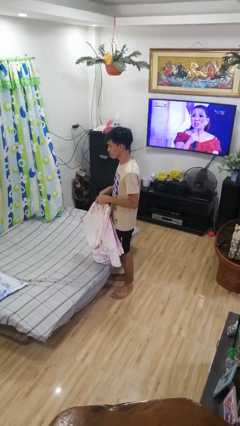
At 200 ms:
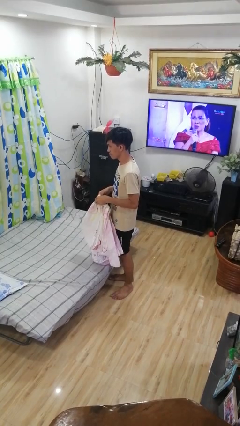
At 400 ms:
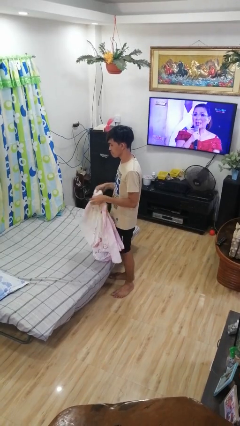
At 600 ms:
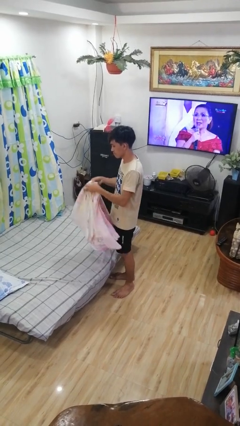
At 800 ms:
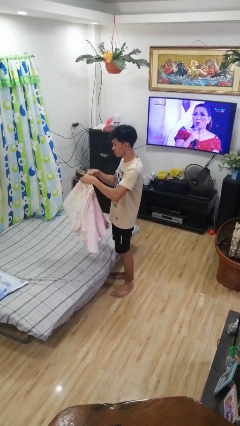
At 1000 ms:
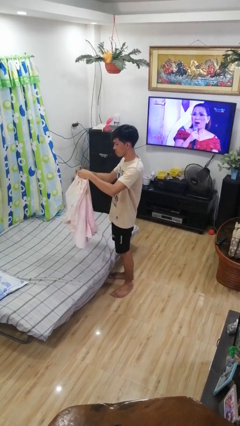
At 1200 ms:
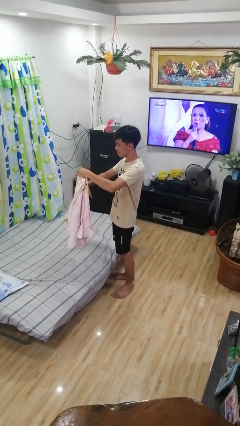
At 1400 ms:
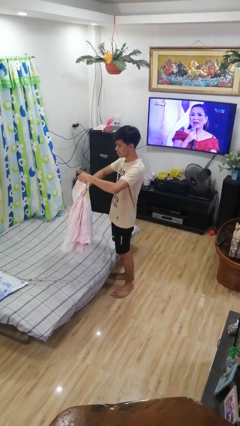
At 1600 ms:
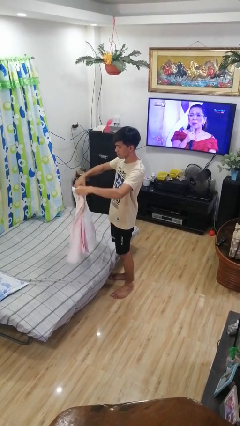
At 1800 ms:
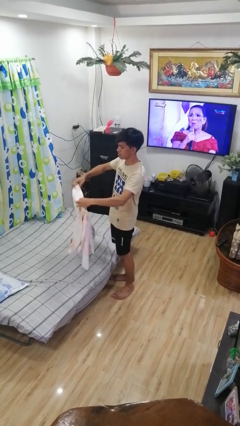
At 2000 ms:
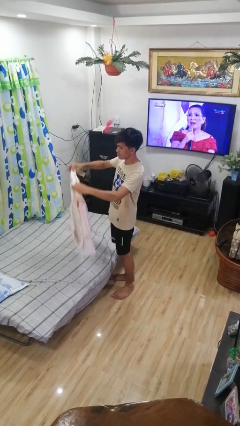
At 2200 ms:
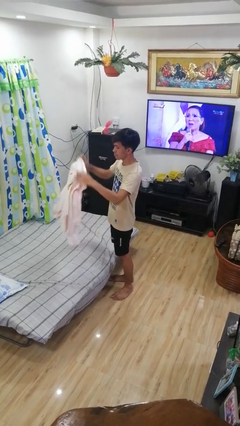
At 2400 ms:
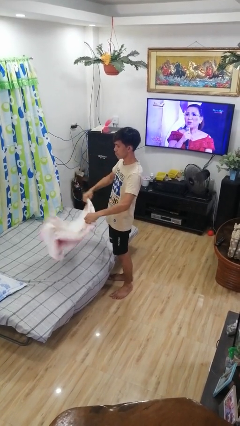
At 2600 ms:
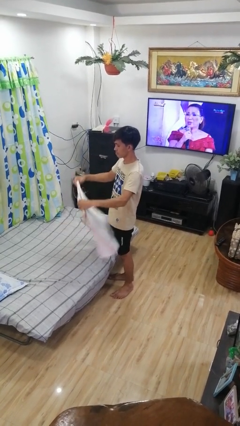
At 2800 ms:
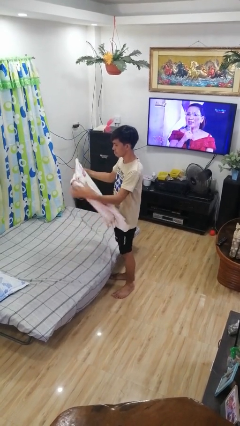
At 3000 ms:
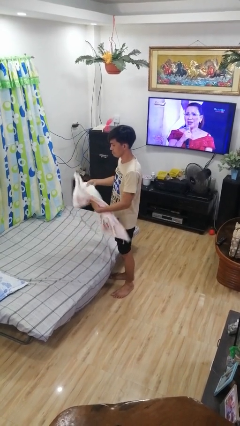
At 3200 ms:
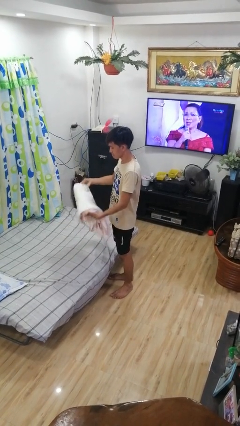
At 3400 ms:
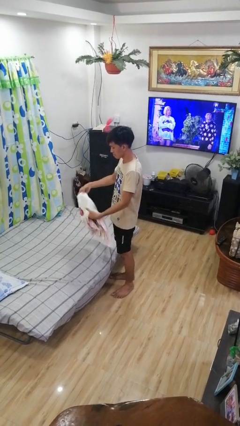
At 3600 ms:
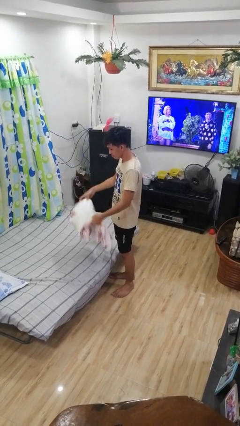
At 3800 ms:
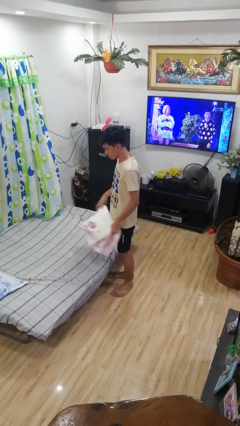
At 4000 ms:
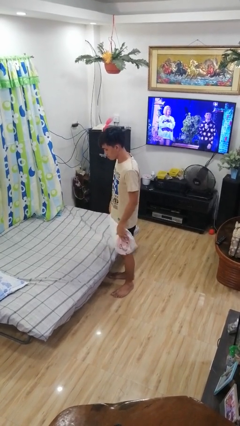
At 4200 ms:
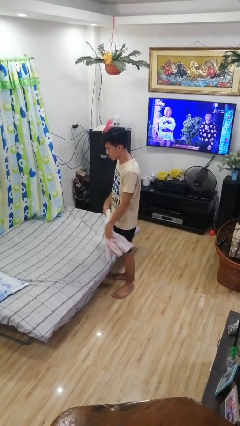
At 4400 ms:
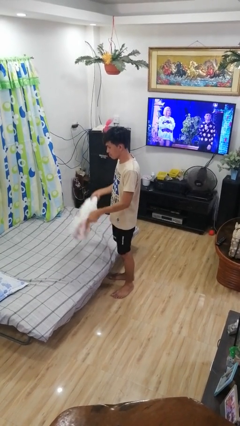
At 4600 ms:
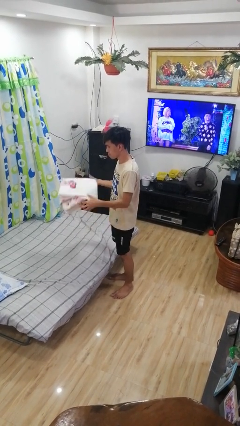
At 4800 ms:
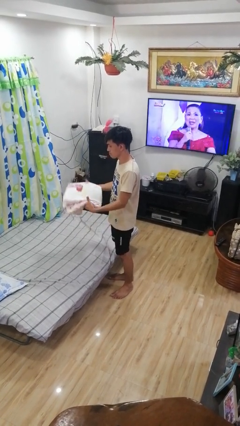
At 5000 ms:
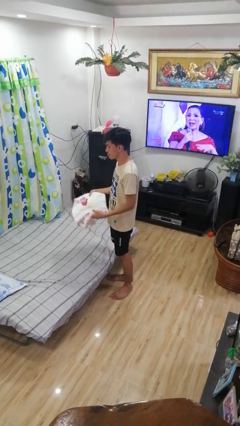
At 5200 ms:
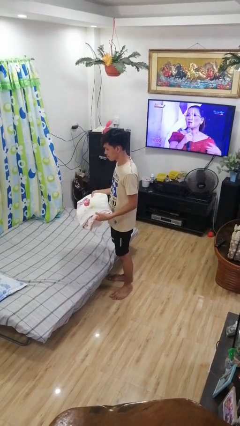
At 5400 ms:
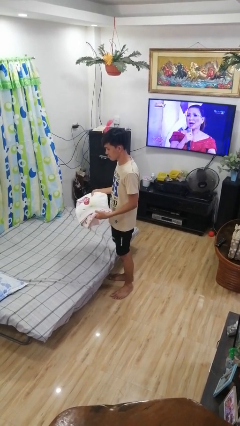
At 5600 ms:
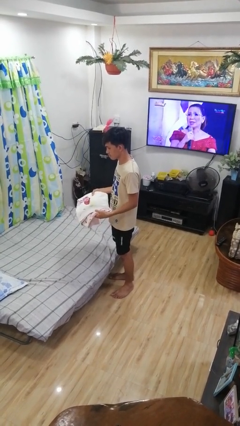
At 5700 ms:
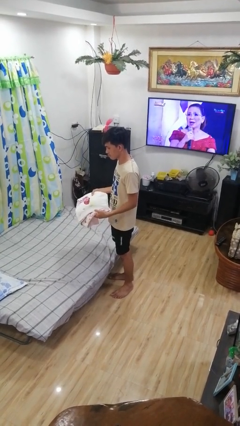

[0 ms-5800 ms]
person folds blanket

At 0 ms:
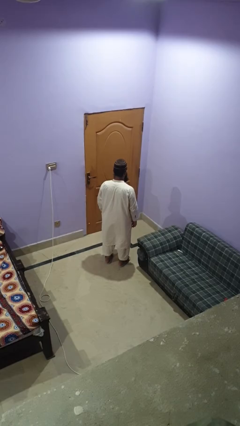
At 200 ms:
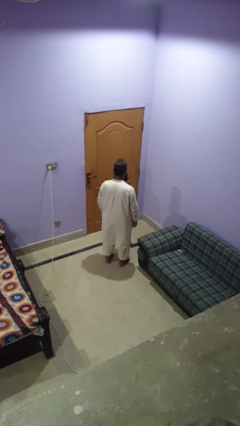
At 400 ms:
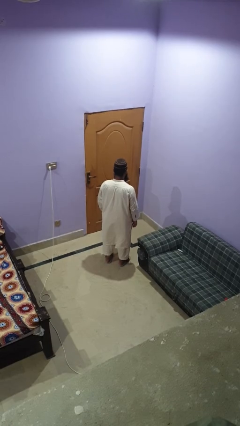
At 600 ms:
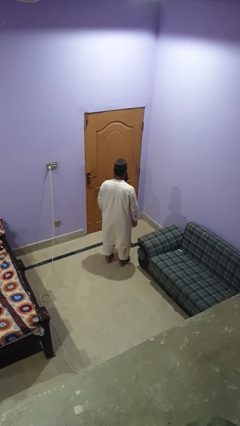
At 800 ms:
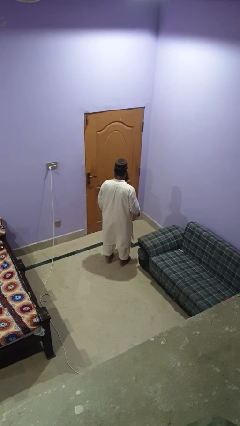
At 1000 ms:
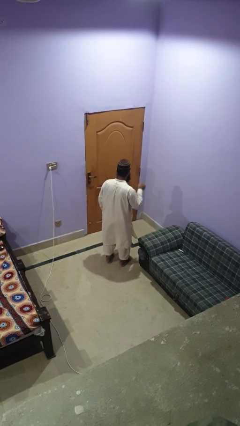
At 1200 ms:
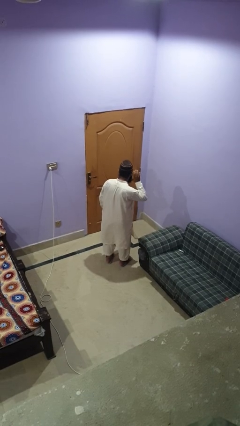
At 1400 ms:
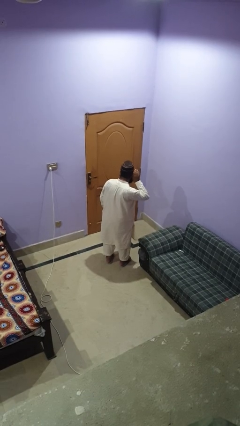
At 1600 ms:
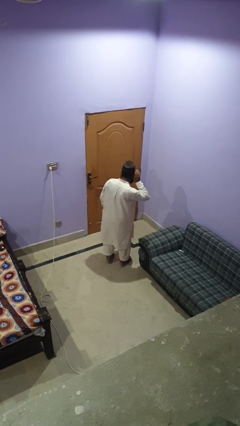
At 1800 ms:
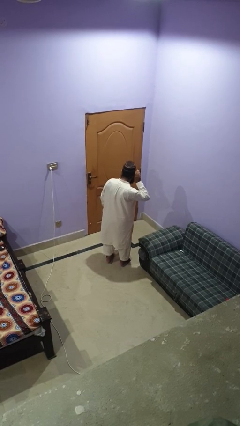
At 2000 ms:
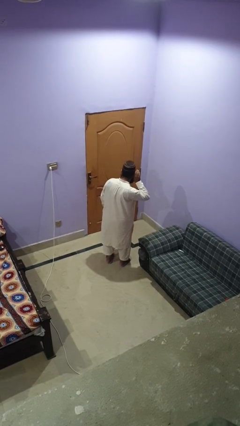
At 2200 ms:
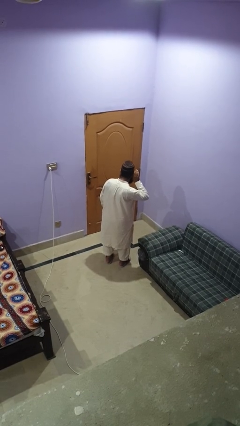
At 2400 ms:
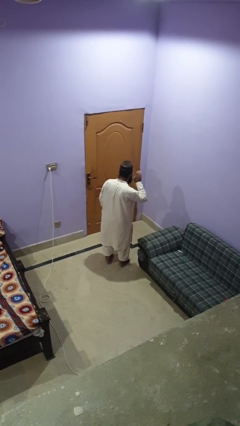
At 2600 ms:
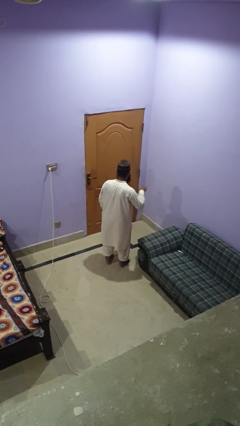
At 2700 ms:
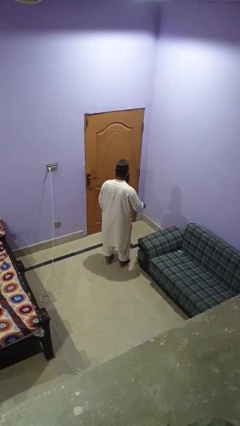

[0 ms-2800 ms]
person gestures listen closely

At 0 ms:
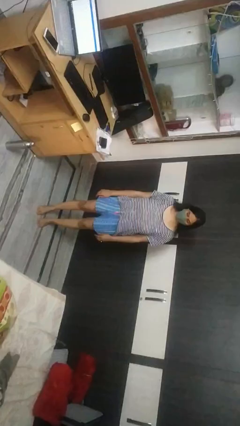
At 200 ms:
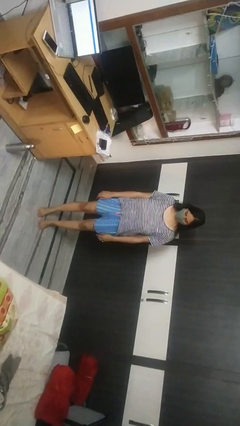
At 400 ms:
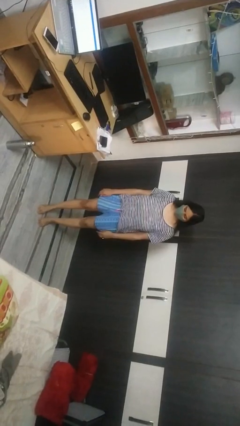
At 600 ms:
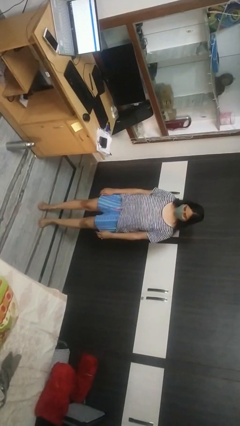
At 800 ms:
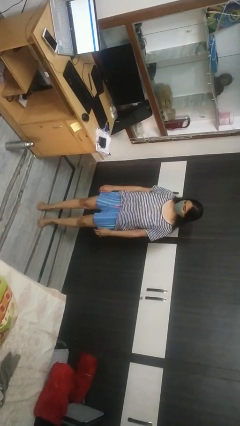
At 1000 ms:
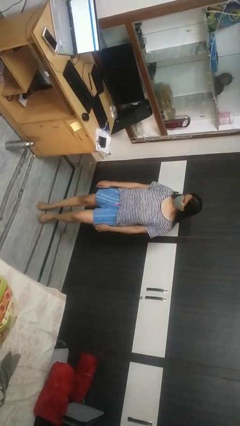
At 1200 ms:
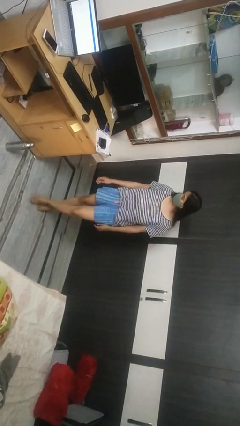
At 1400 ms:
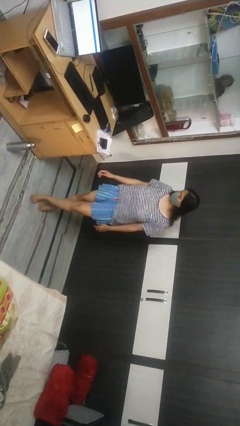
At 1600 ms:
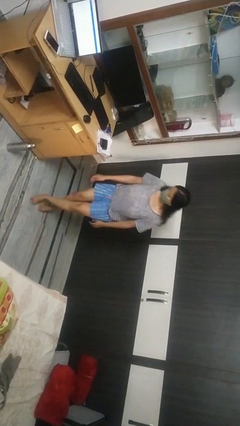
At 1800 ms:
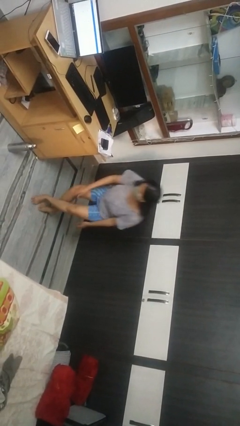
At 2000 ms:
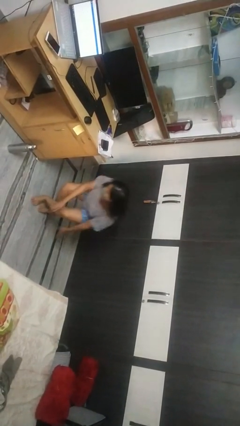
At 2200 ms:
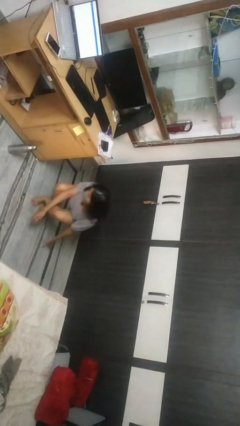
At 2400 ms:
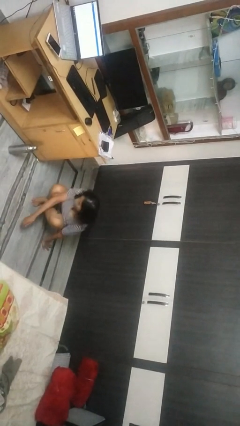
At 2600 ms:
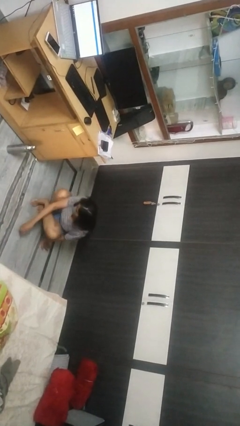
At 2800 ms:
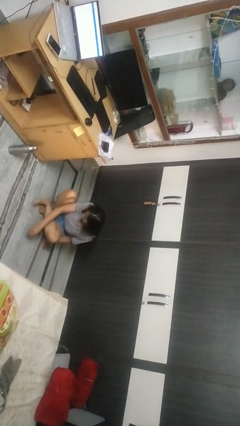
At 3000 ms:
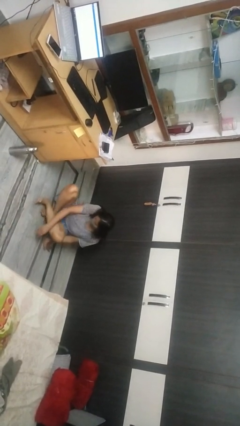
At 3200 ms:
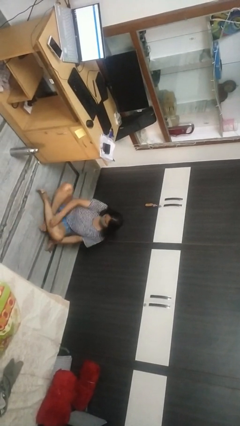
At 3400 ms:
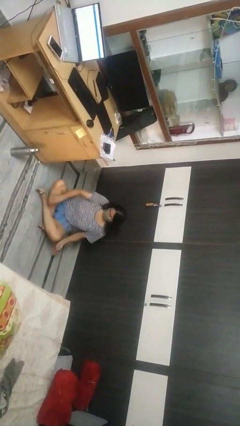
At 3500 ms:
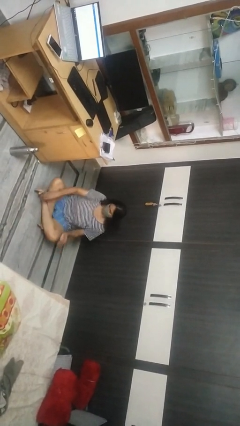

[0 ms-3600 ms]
person sits crisscross

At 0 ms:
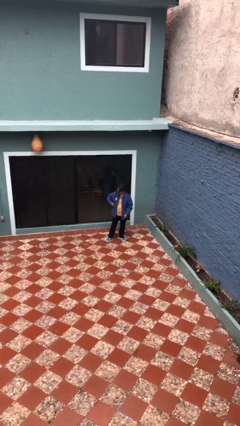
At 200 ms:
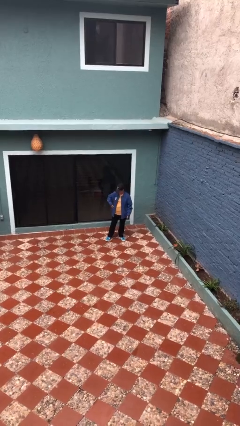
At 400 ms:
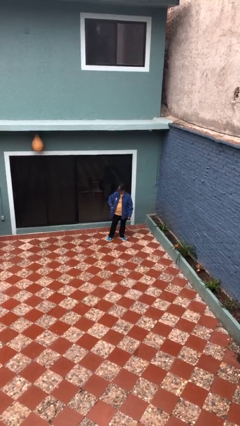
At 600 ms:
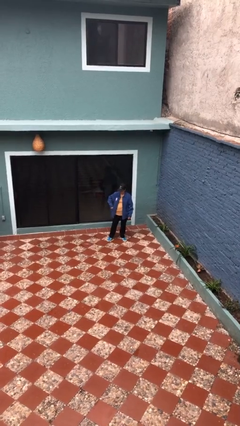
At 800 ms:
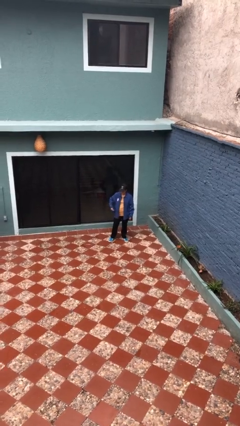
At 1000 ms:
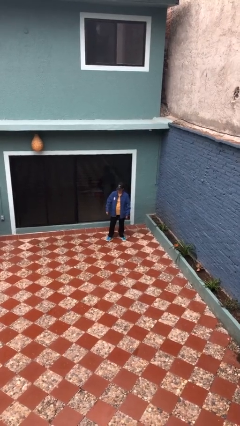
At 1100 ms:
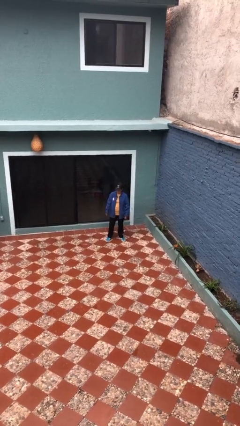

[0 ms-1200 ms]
person puts phone into pocket

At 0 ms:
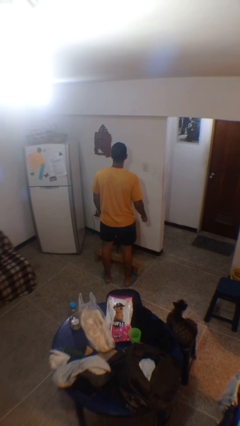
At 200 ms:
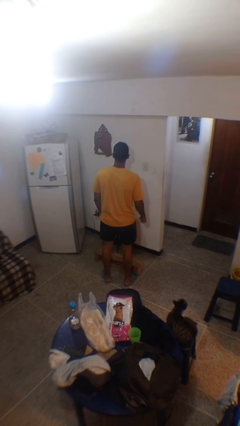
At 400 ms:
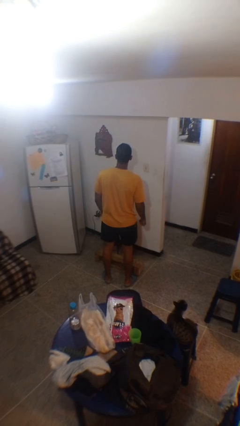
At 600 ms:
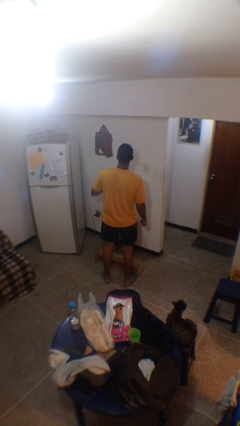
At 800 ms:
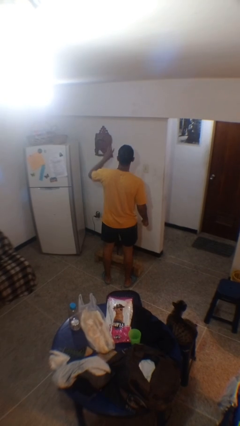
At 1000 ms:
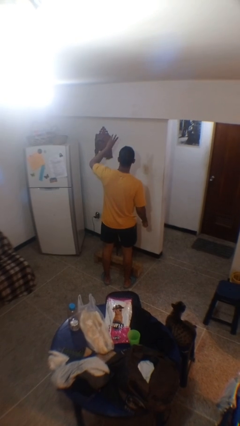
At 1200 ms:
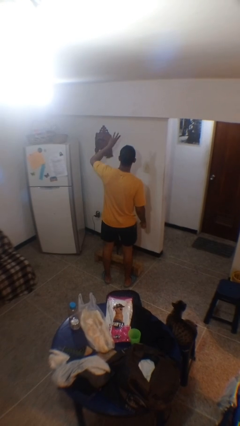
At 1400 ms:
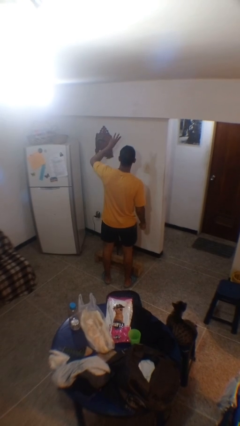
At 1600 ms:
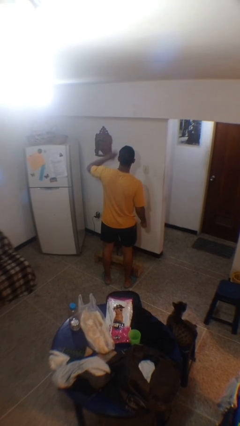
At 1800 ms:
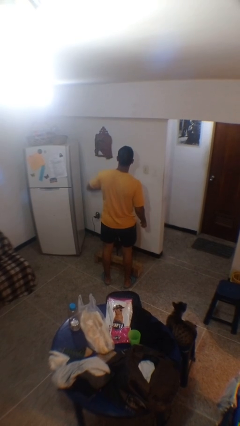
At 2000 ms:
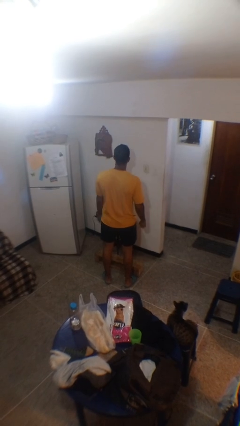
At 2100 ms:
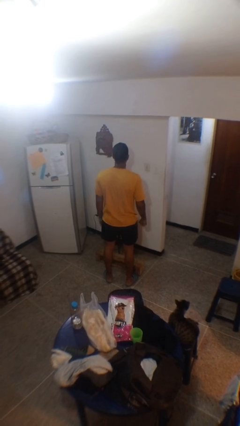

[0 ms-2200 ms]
person gestures number three

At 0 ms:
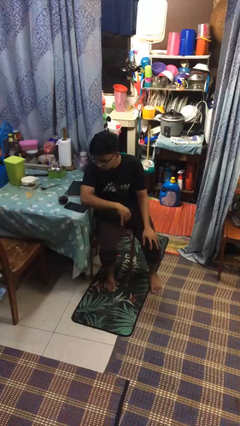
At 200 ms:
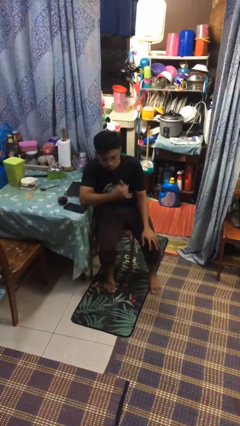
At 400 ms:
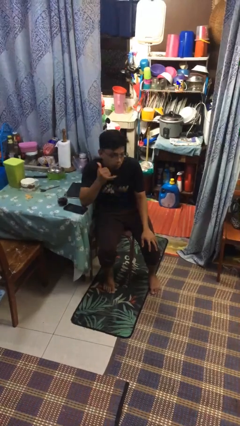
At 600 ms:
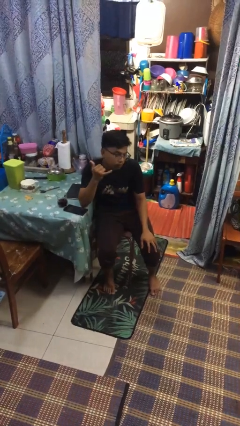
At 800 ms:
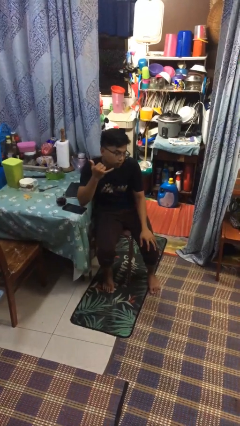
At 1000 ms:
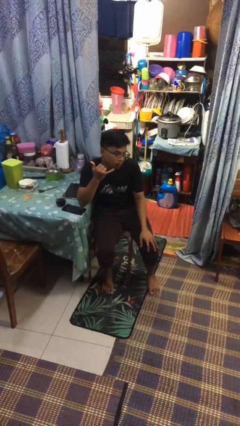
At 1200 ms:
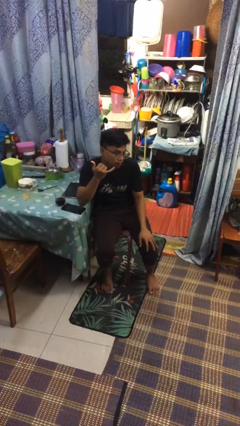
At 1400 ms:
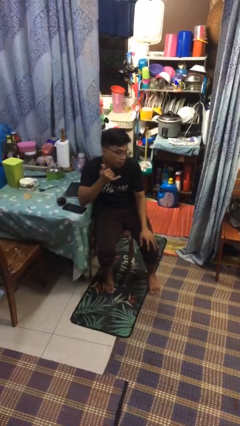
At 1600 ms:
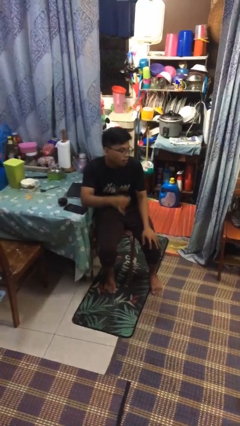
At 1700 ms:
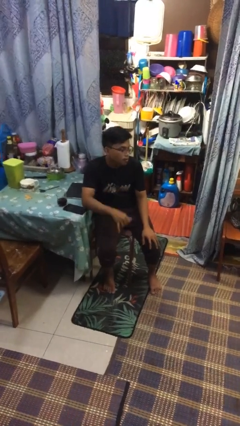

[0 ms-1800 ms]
person gestures hang loose

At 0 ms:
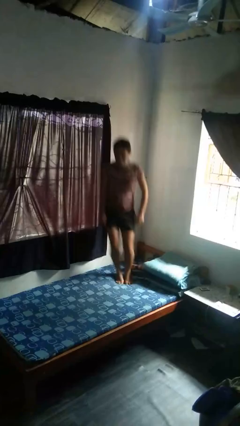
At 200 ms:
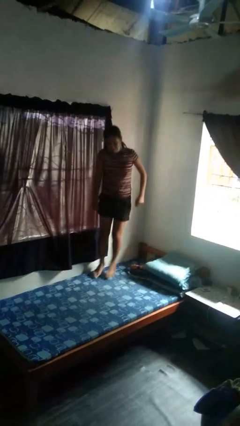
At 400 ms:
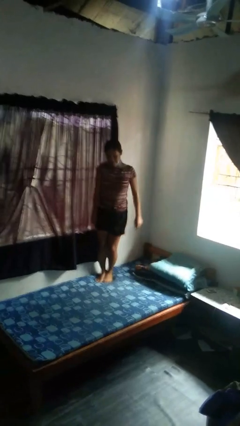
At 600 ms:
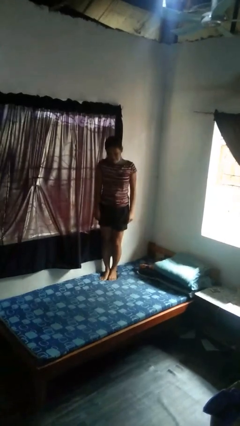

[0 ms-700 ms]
person jumps on bed
